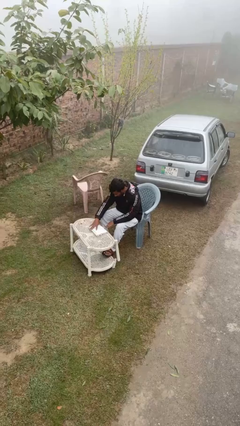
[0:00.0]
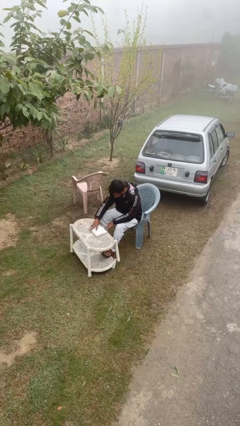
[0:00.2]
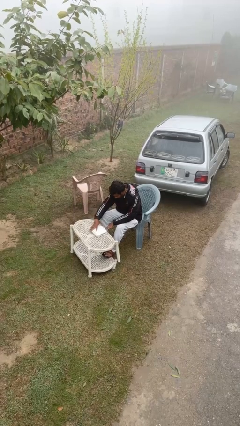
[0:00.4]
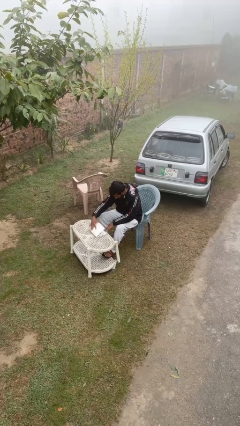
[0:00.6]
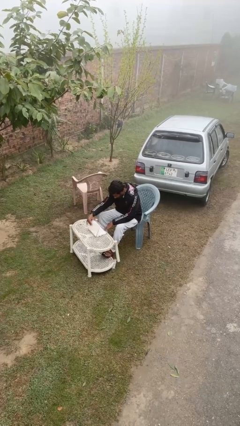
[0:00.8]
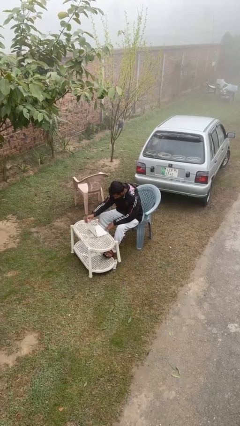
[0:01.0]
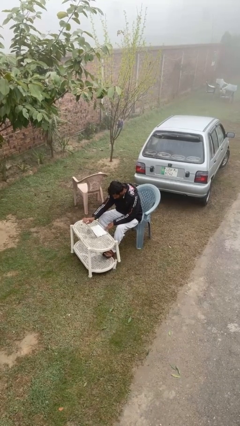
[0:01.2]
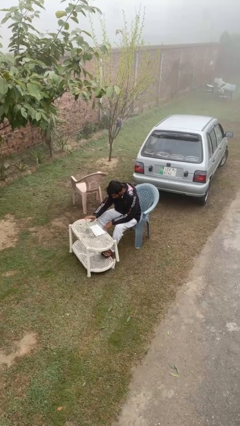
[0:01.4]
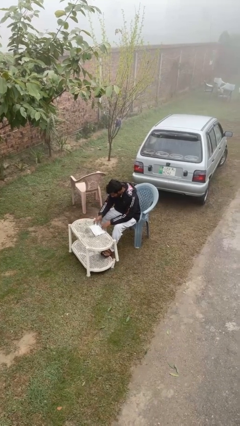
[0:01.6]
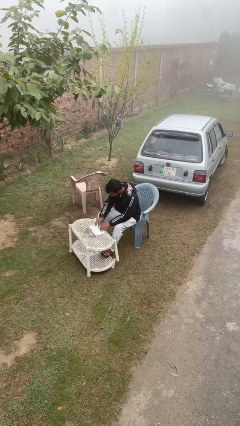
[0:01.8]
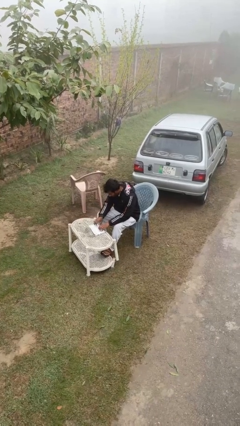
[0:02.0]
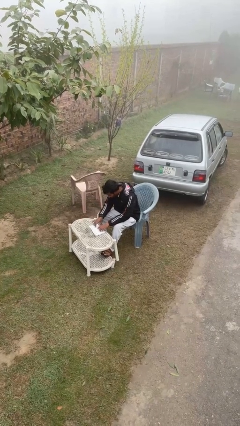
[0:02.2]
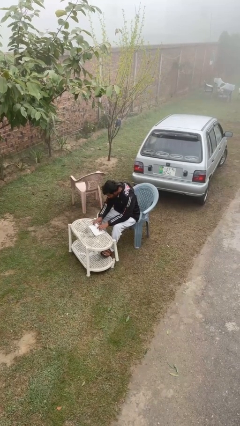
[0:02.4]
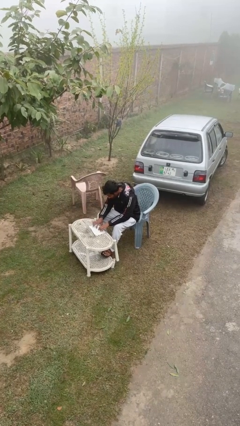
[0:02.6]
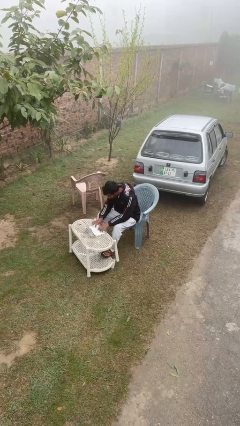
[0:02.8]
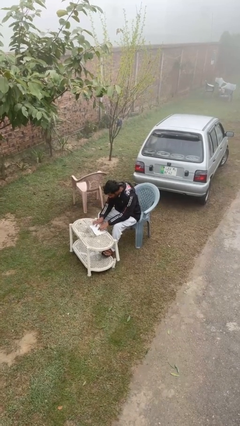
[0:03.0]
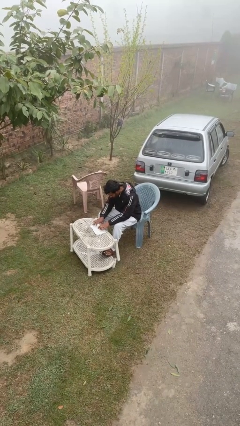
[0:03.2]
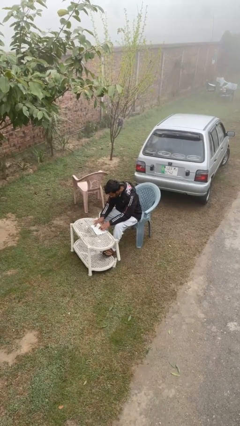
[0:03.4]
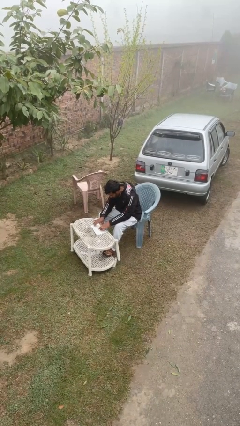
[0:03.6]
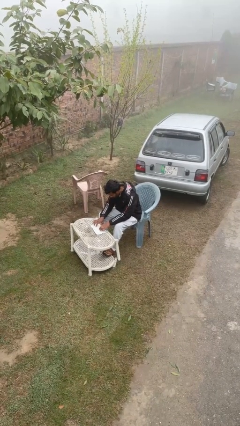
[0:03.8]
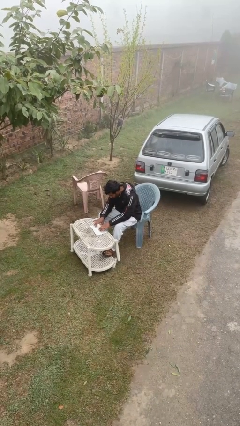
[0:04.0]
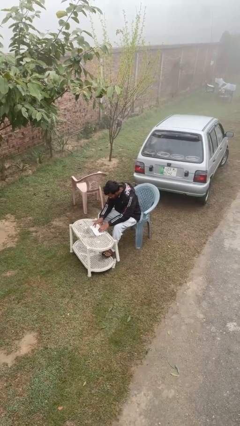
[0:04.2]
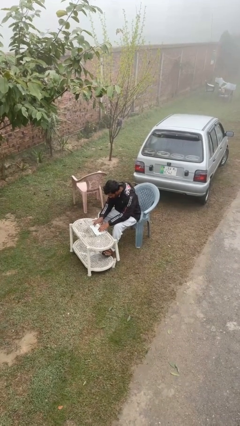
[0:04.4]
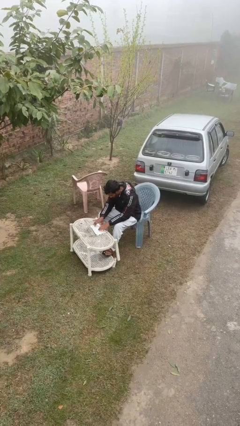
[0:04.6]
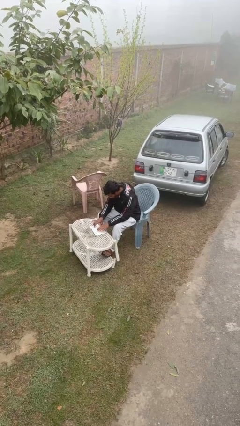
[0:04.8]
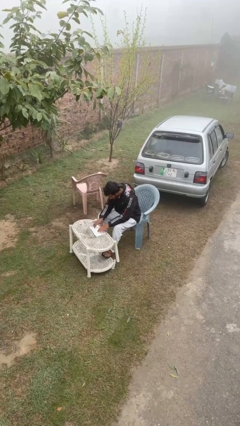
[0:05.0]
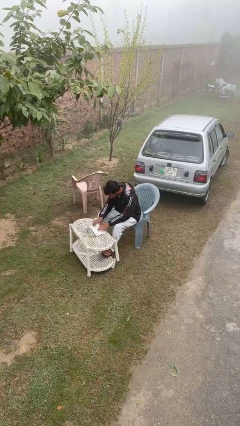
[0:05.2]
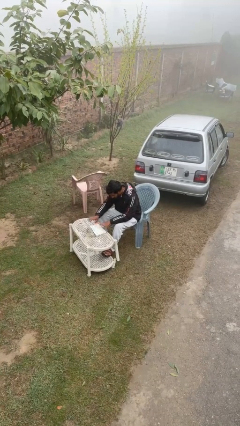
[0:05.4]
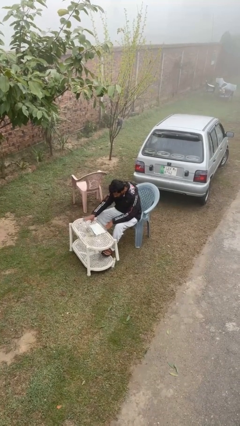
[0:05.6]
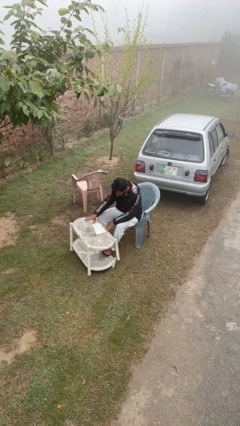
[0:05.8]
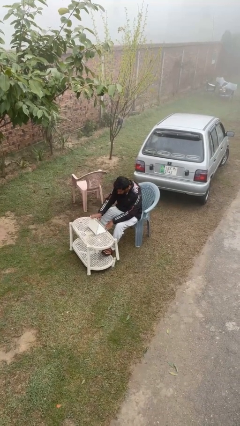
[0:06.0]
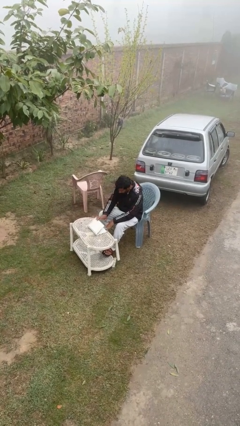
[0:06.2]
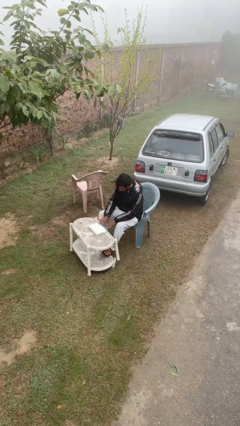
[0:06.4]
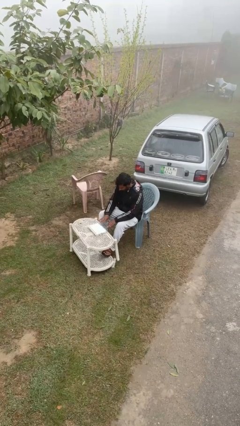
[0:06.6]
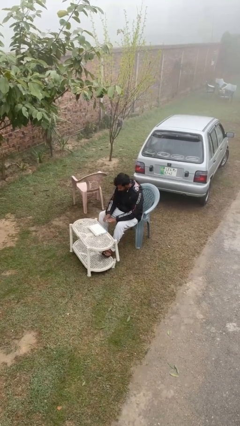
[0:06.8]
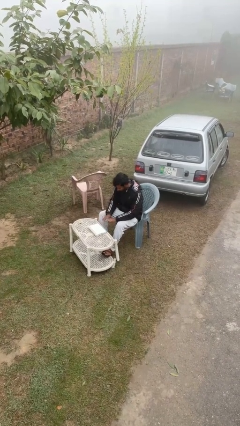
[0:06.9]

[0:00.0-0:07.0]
person interacts with laptop

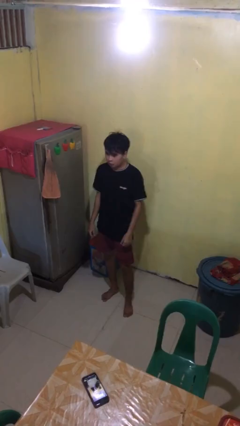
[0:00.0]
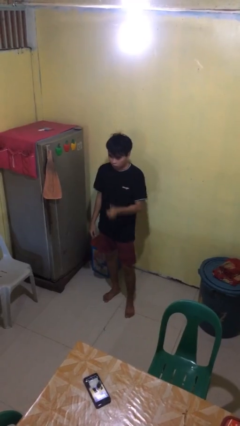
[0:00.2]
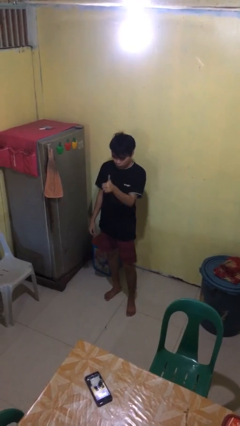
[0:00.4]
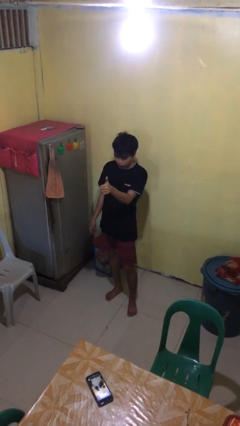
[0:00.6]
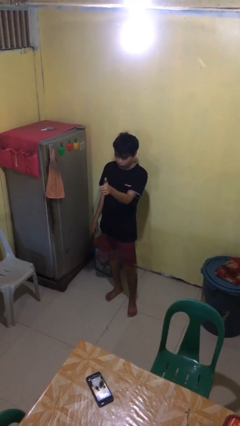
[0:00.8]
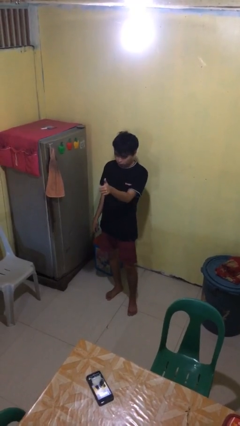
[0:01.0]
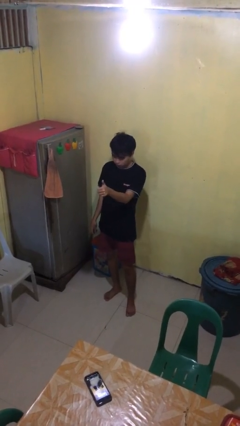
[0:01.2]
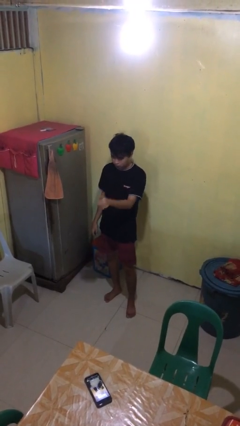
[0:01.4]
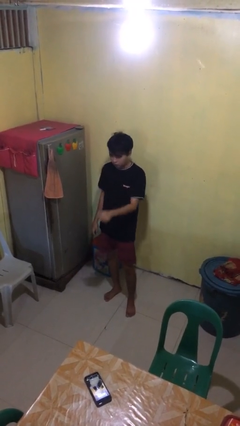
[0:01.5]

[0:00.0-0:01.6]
person gestures thumbs up

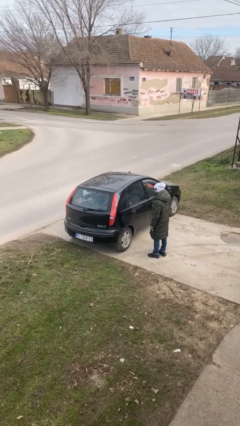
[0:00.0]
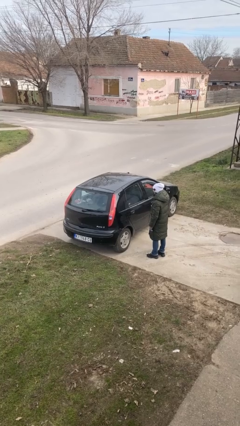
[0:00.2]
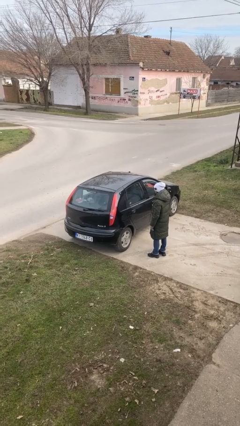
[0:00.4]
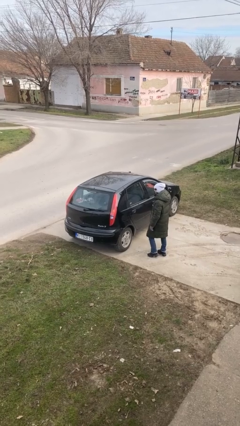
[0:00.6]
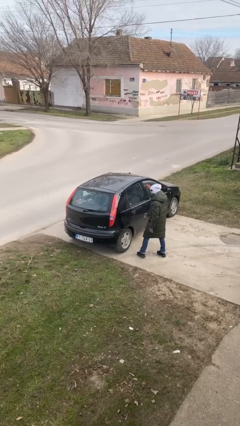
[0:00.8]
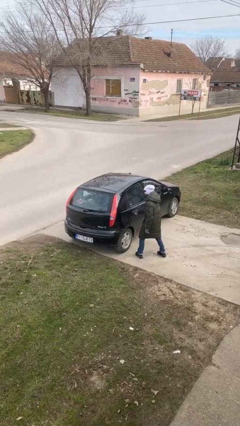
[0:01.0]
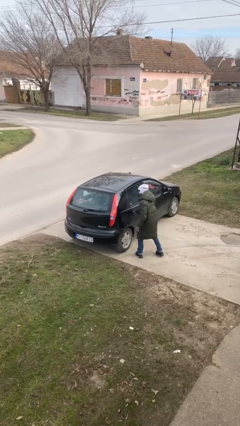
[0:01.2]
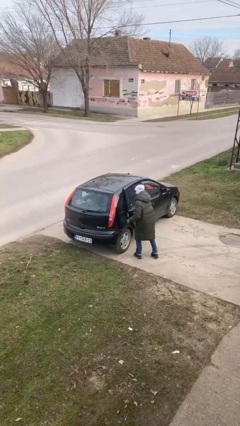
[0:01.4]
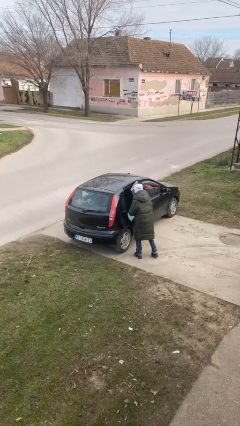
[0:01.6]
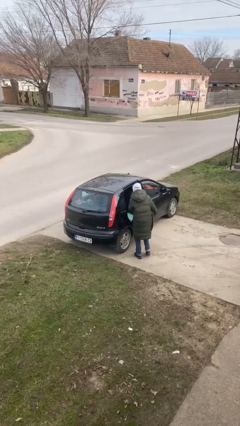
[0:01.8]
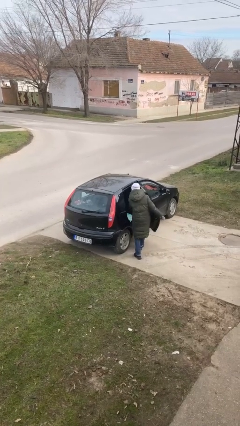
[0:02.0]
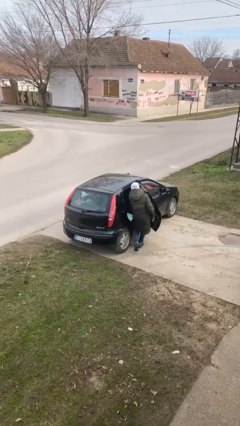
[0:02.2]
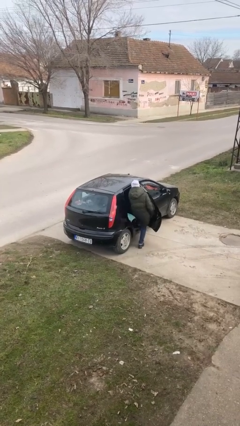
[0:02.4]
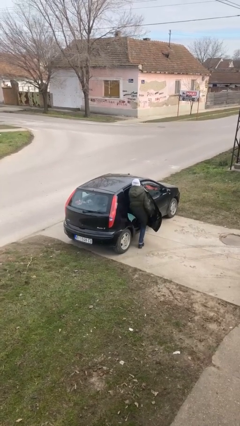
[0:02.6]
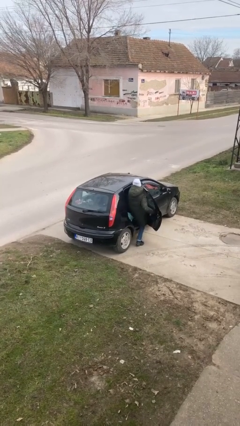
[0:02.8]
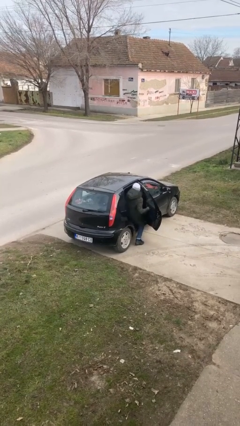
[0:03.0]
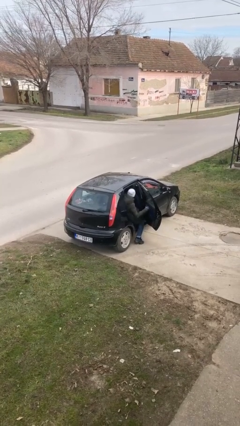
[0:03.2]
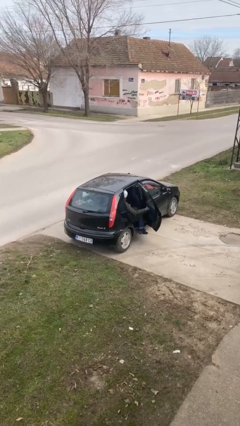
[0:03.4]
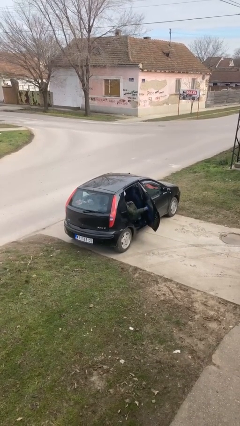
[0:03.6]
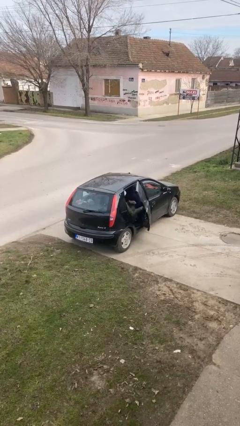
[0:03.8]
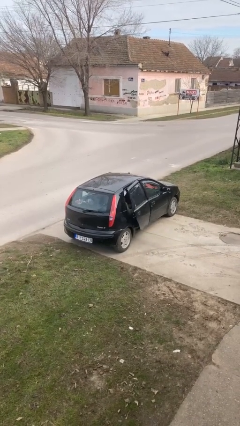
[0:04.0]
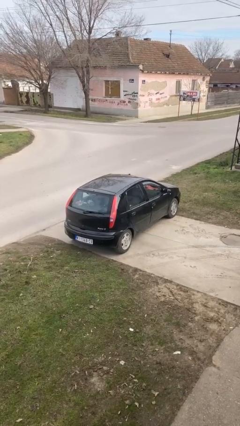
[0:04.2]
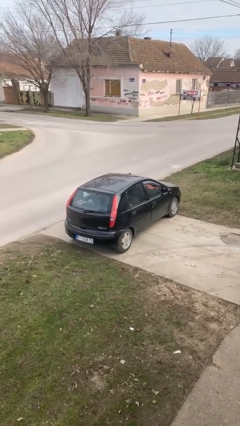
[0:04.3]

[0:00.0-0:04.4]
car picks up person

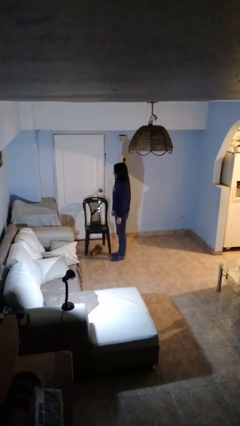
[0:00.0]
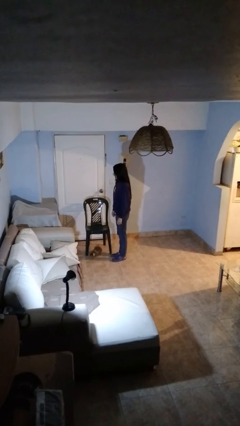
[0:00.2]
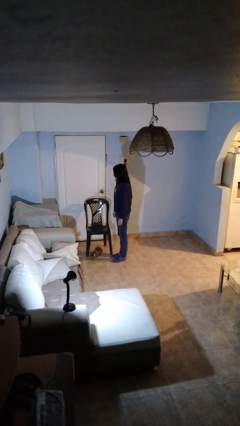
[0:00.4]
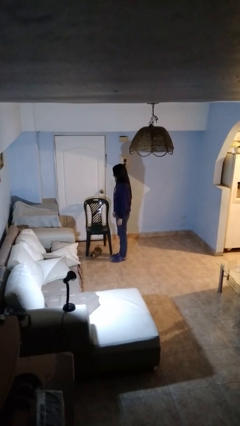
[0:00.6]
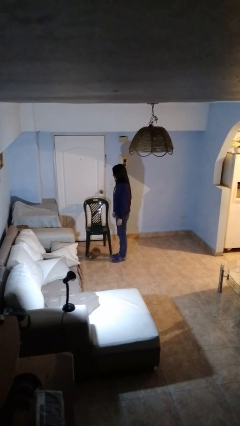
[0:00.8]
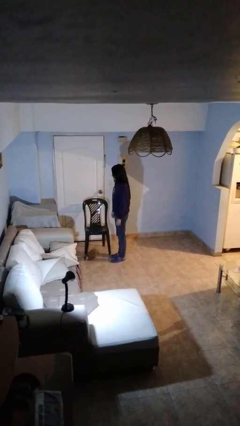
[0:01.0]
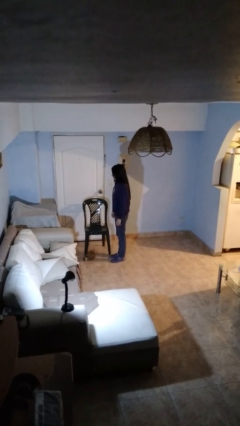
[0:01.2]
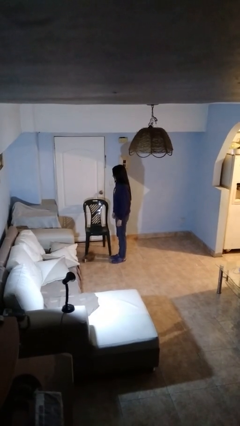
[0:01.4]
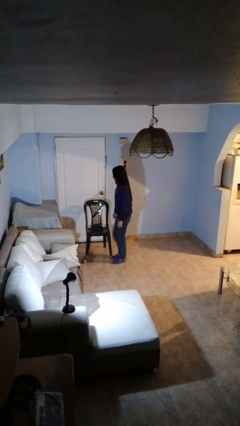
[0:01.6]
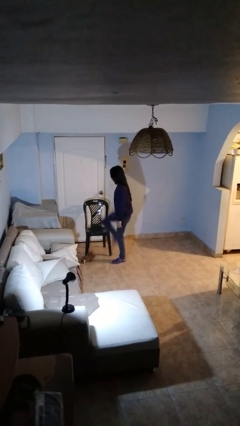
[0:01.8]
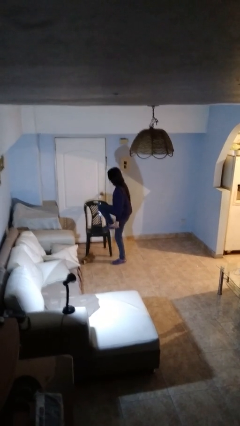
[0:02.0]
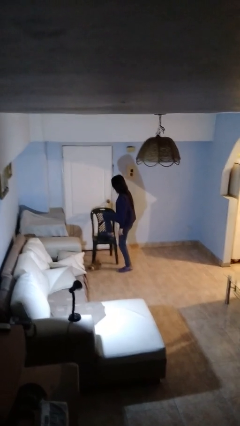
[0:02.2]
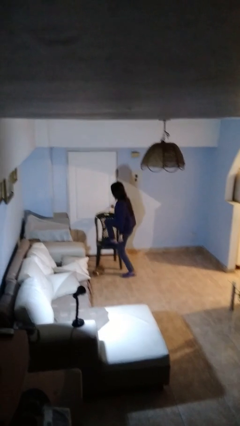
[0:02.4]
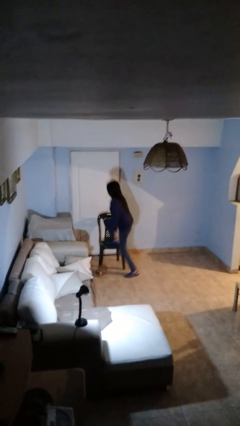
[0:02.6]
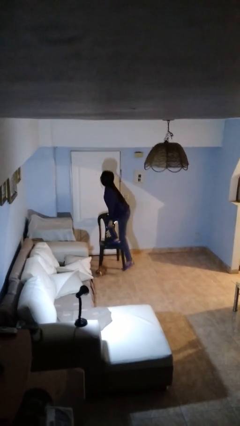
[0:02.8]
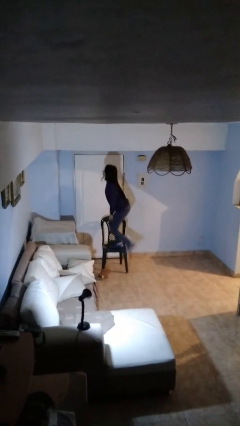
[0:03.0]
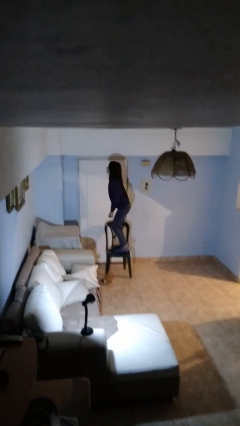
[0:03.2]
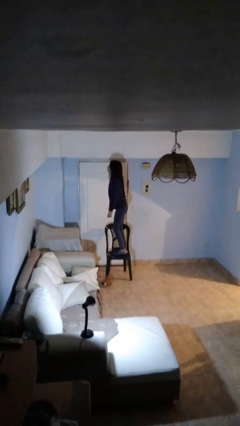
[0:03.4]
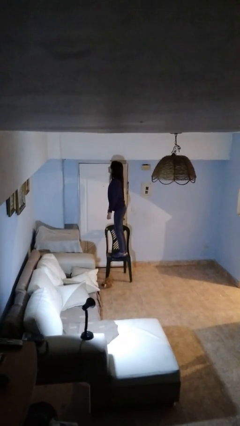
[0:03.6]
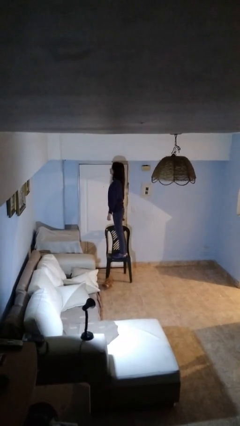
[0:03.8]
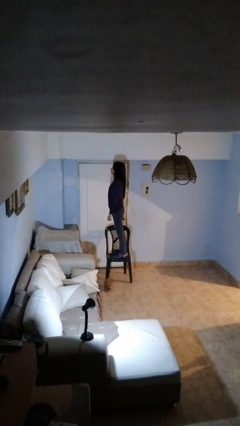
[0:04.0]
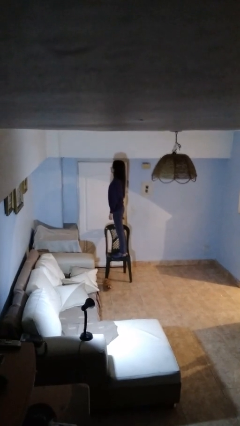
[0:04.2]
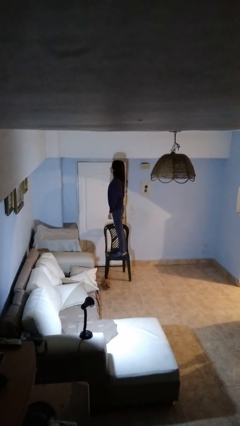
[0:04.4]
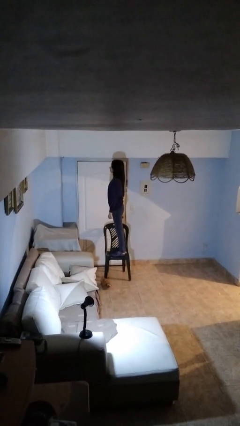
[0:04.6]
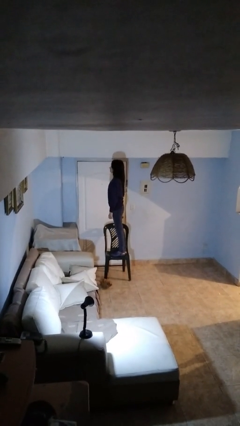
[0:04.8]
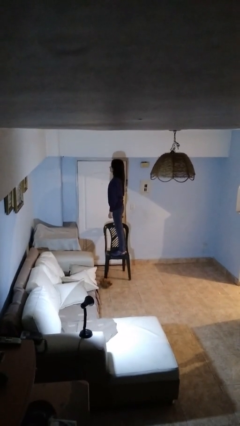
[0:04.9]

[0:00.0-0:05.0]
person climbs on chair
